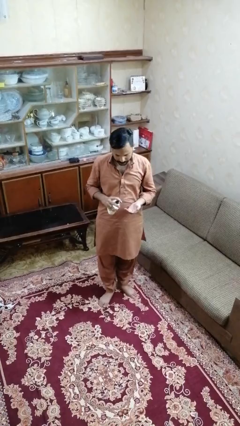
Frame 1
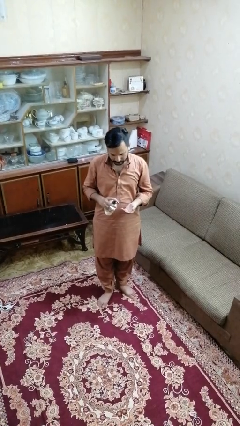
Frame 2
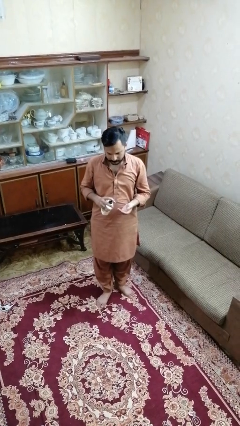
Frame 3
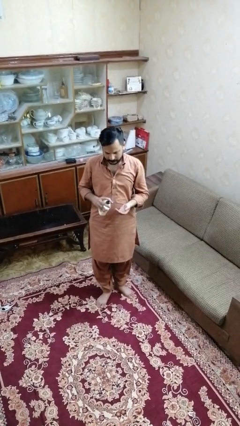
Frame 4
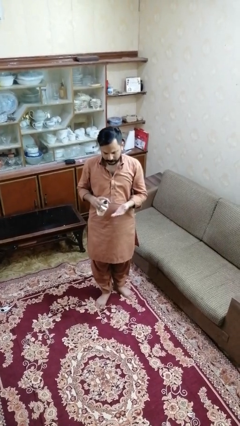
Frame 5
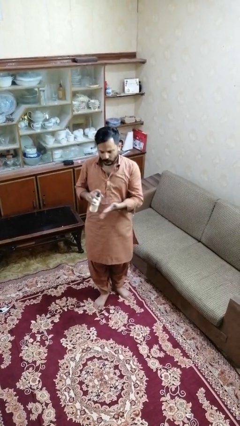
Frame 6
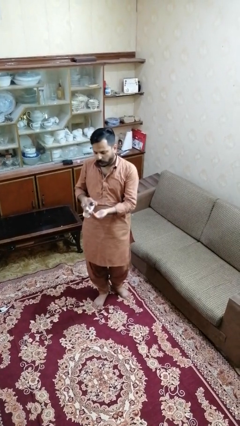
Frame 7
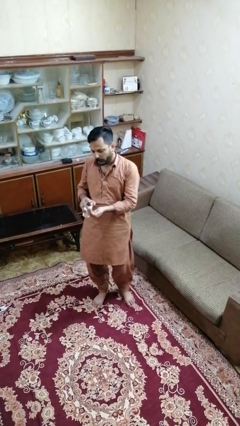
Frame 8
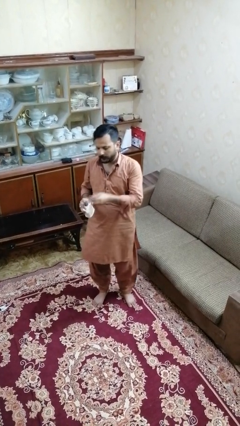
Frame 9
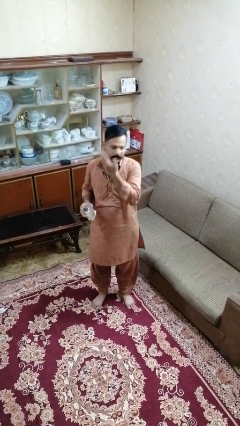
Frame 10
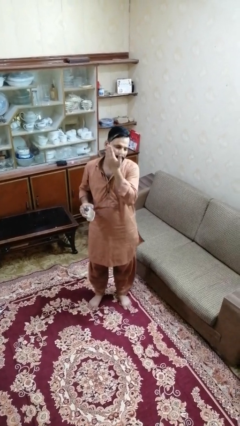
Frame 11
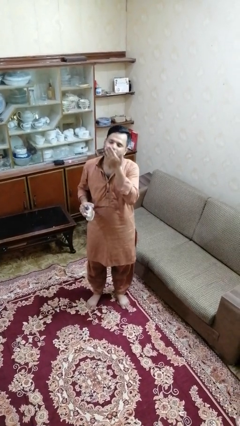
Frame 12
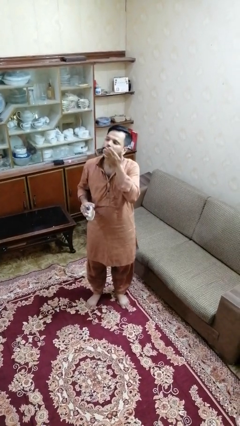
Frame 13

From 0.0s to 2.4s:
person applies facial moisturizer

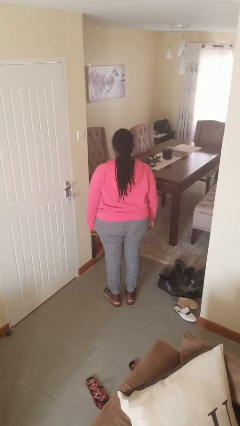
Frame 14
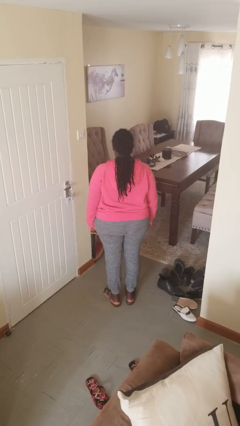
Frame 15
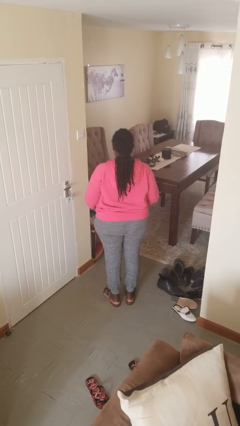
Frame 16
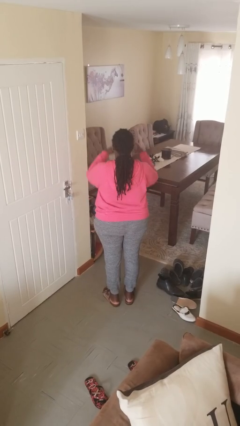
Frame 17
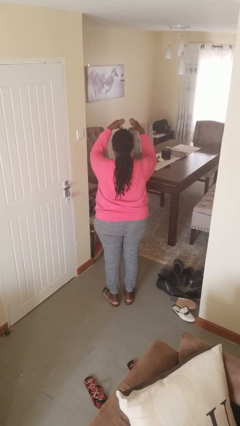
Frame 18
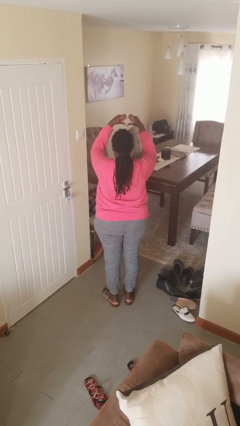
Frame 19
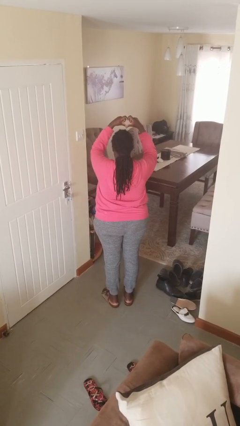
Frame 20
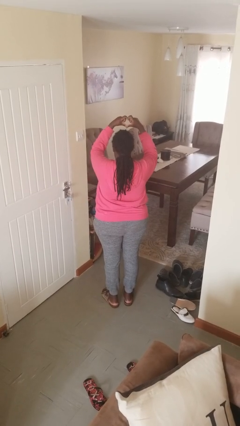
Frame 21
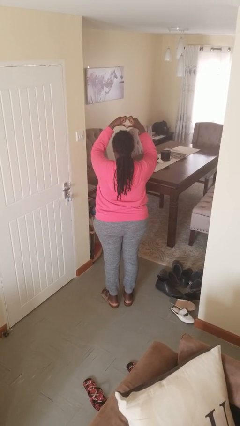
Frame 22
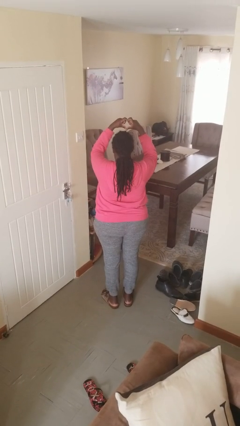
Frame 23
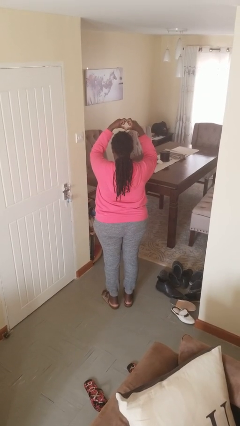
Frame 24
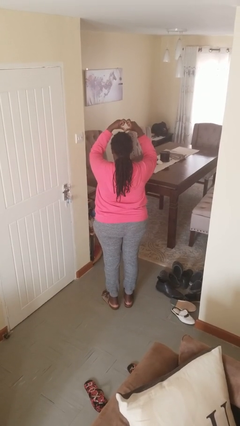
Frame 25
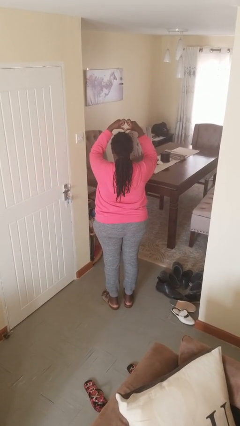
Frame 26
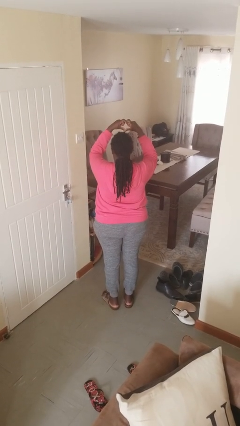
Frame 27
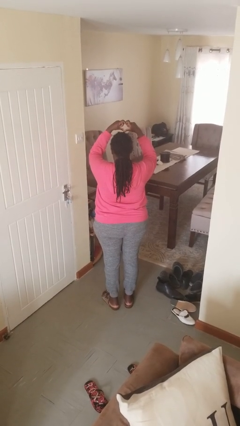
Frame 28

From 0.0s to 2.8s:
person gestures heart

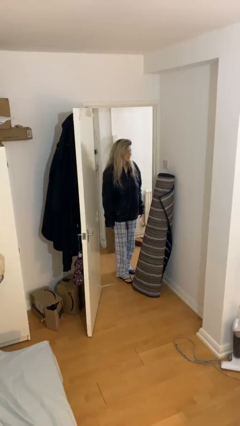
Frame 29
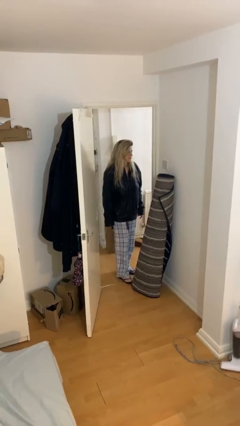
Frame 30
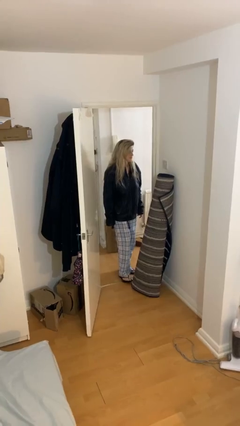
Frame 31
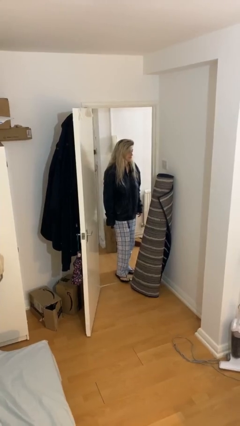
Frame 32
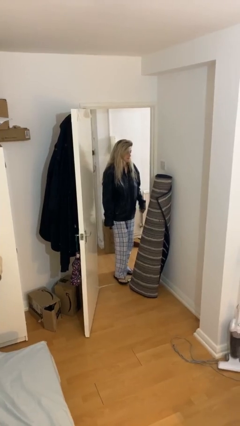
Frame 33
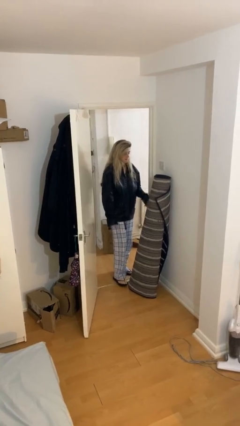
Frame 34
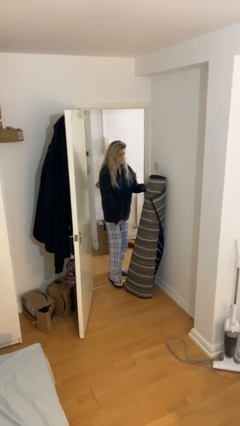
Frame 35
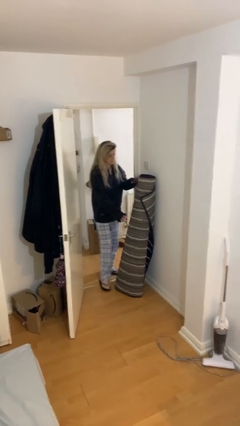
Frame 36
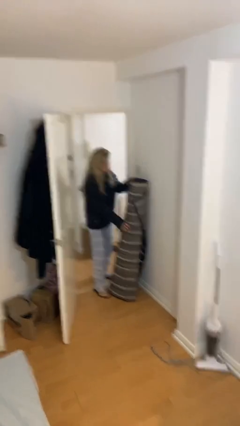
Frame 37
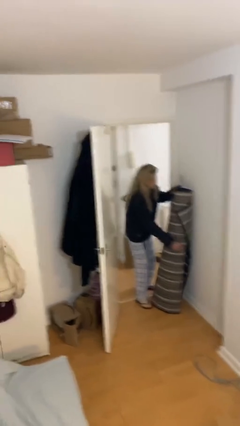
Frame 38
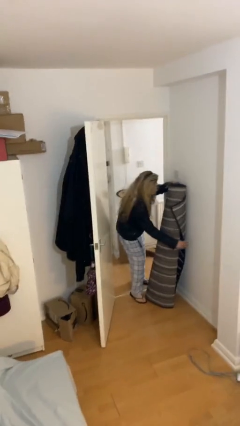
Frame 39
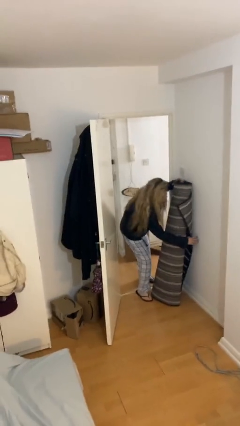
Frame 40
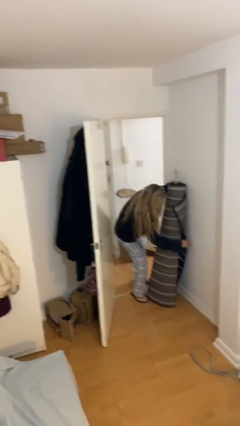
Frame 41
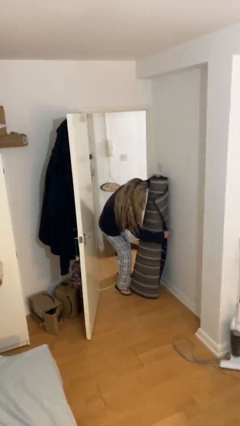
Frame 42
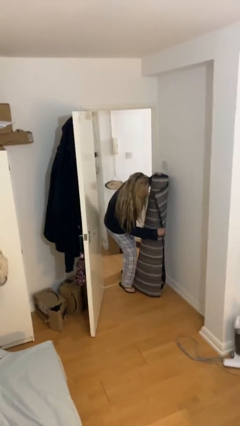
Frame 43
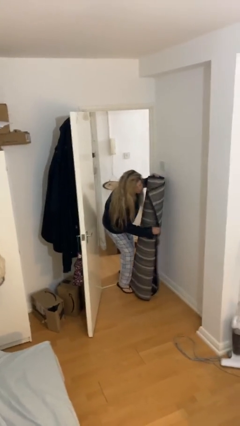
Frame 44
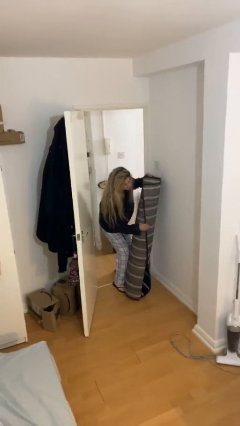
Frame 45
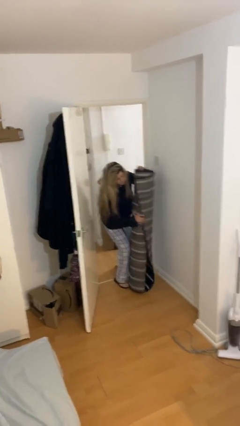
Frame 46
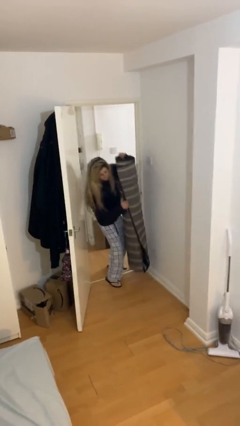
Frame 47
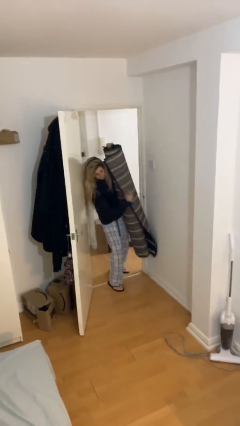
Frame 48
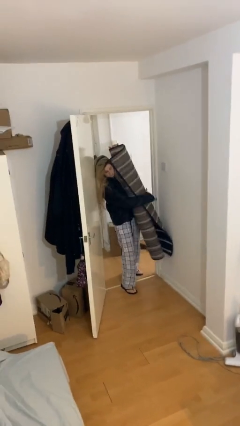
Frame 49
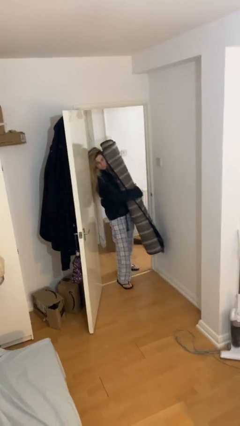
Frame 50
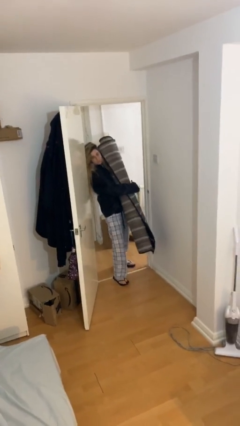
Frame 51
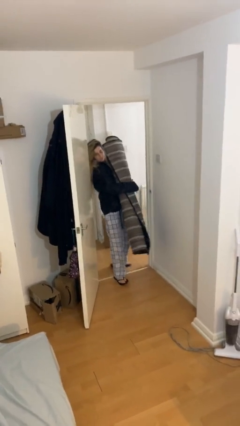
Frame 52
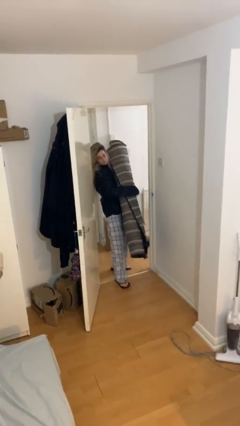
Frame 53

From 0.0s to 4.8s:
person picks up object from floor

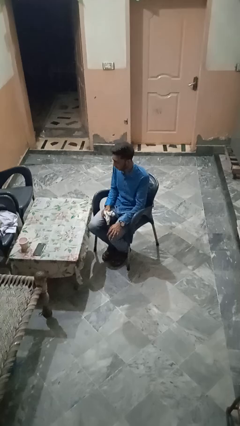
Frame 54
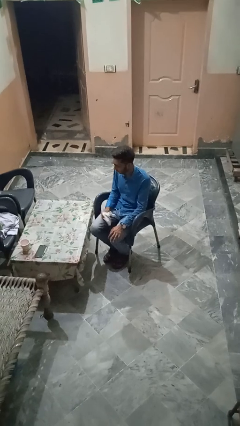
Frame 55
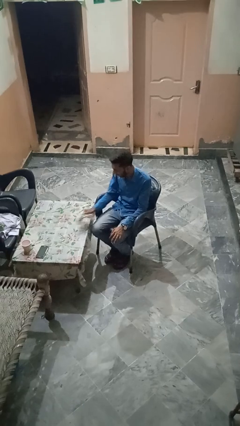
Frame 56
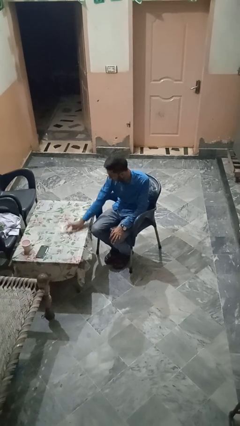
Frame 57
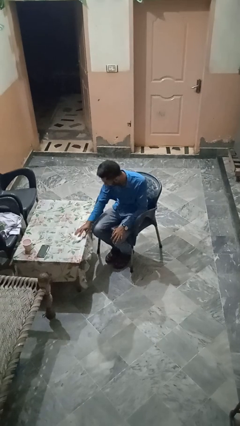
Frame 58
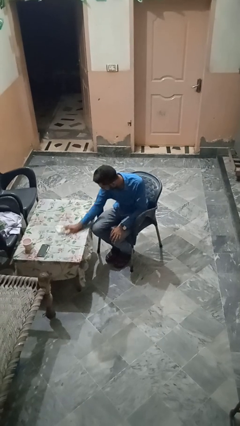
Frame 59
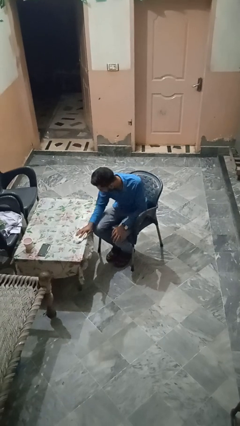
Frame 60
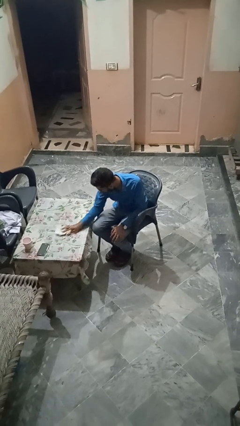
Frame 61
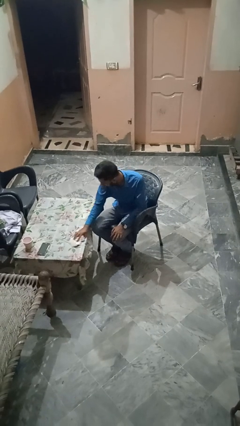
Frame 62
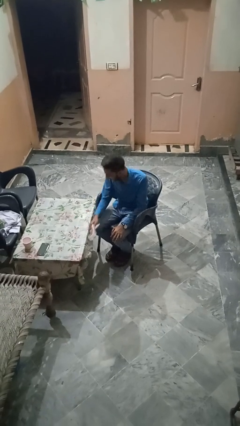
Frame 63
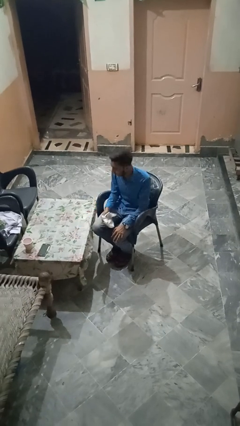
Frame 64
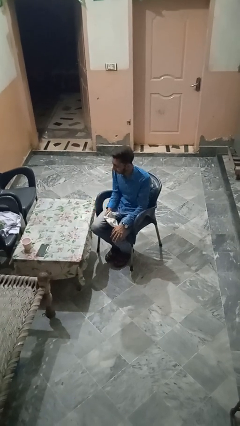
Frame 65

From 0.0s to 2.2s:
person cleans table with rag

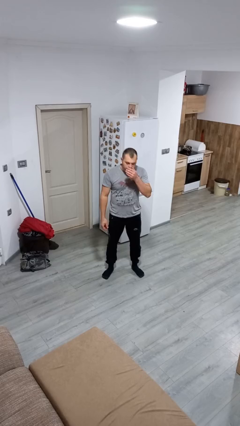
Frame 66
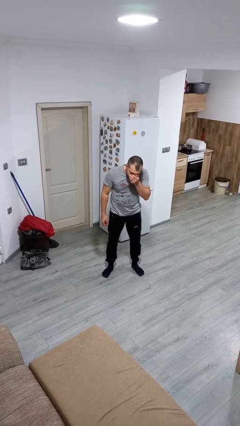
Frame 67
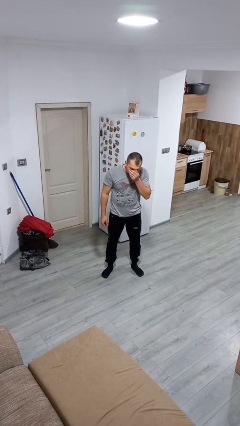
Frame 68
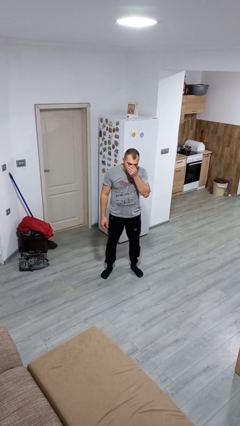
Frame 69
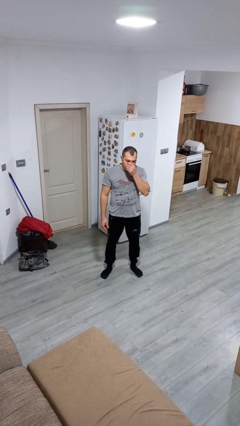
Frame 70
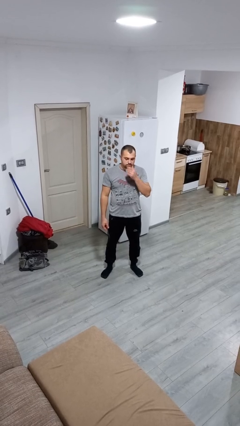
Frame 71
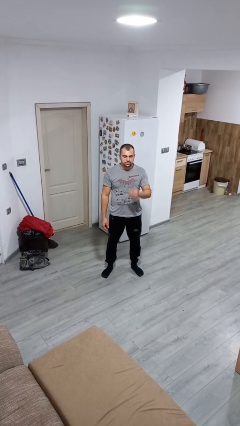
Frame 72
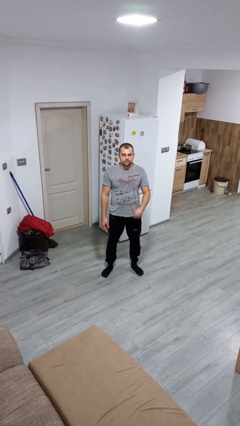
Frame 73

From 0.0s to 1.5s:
person sneezes into hand

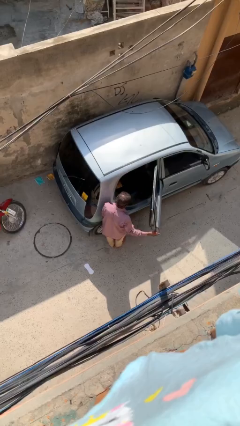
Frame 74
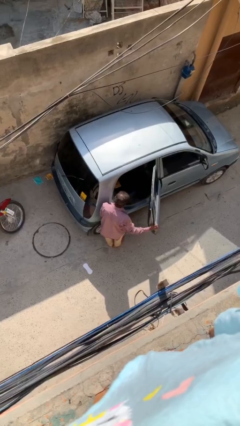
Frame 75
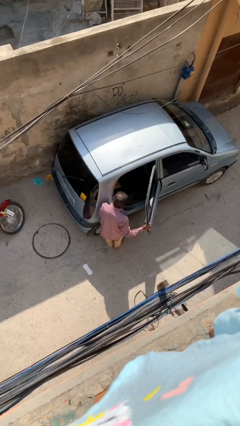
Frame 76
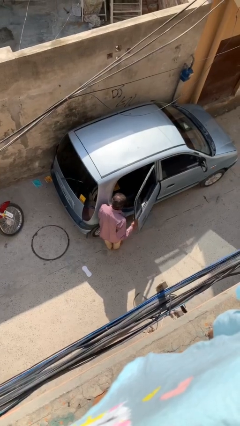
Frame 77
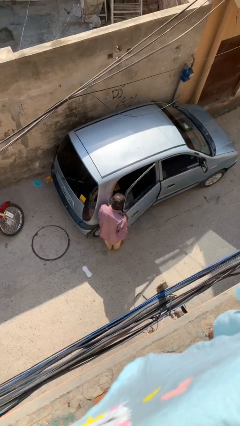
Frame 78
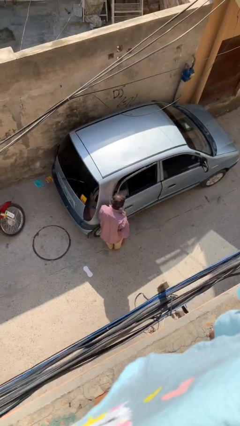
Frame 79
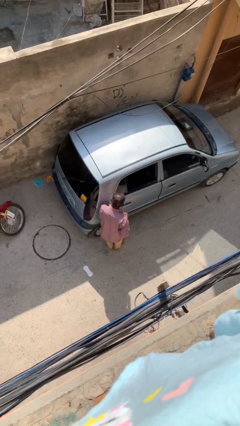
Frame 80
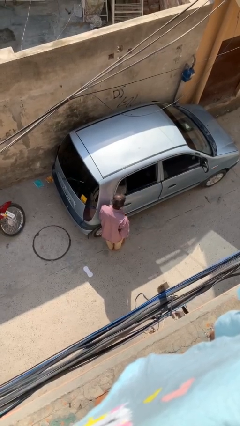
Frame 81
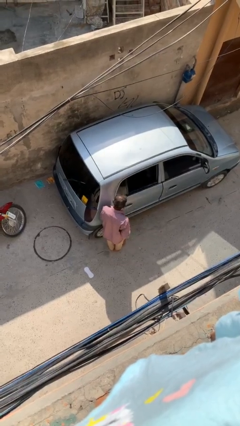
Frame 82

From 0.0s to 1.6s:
person closes car door

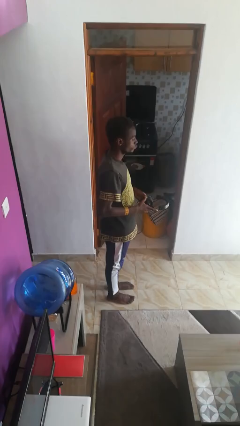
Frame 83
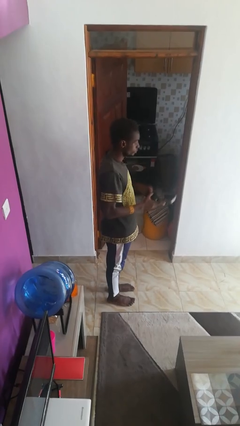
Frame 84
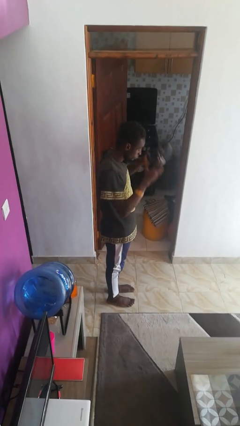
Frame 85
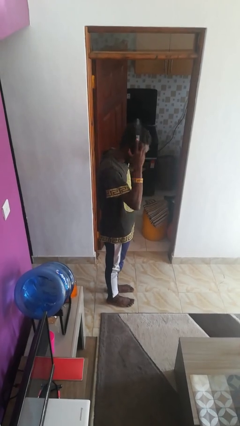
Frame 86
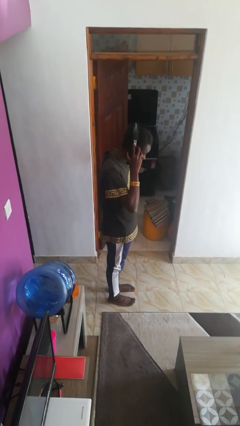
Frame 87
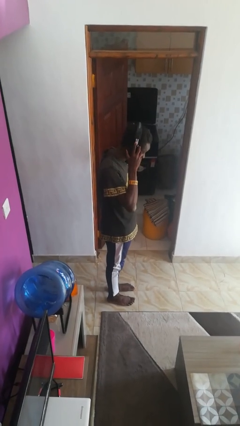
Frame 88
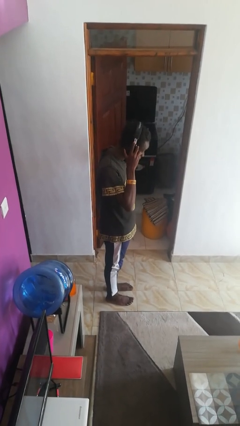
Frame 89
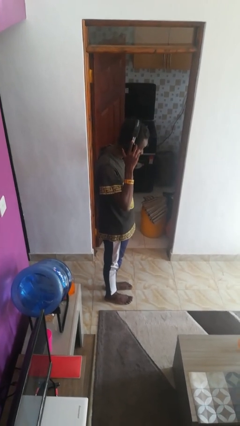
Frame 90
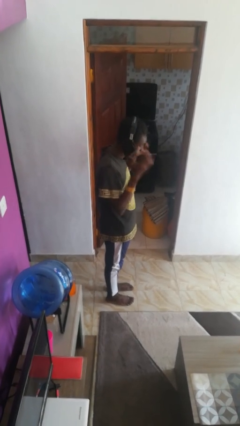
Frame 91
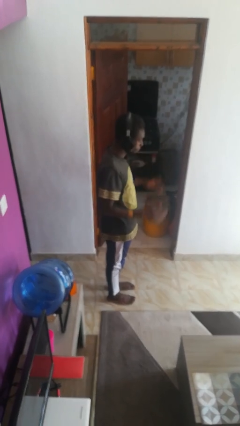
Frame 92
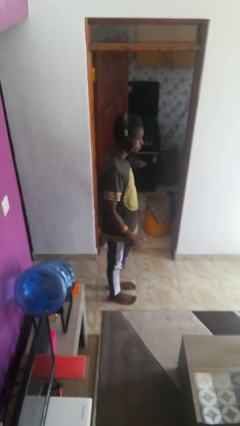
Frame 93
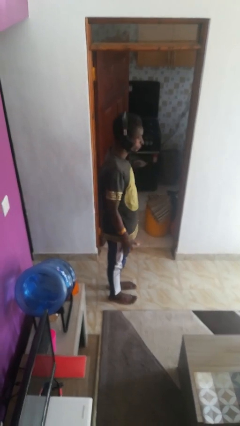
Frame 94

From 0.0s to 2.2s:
person puts on headphones
